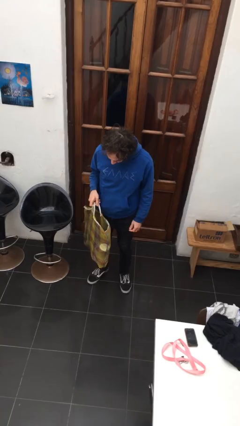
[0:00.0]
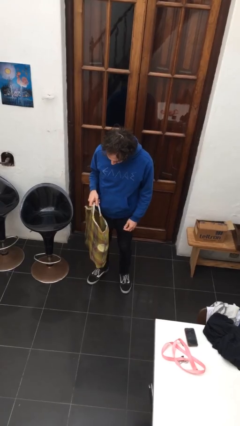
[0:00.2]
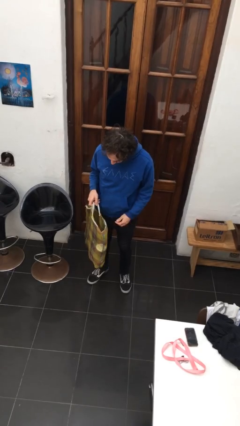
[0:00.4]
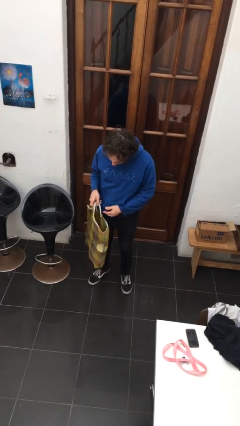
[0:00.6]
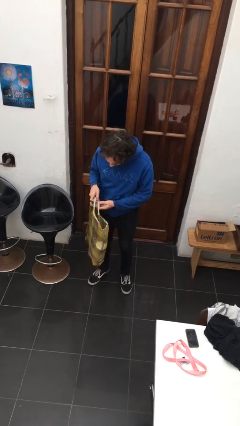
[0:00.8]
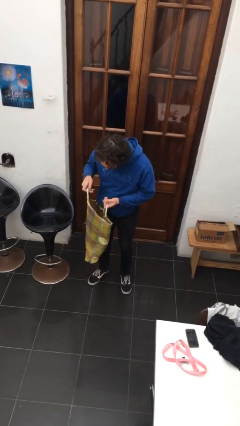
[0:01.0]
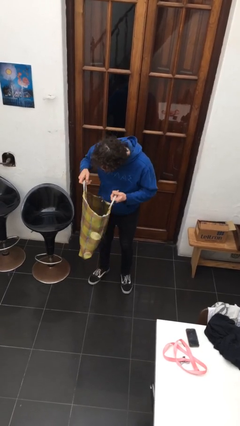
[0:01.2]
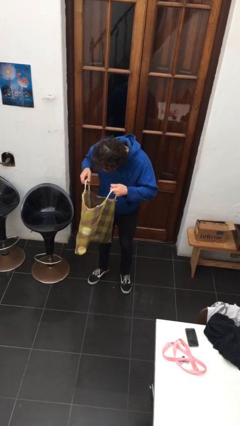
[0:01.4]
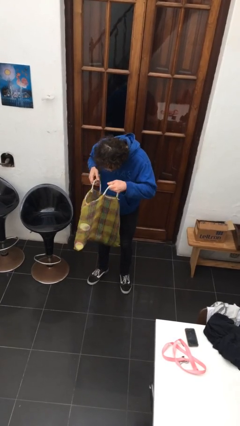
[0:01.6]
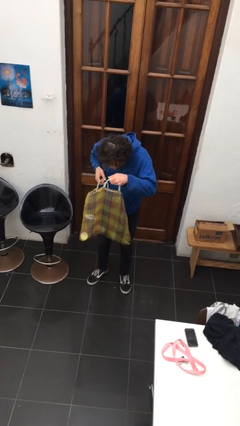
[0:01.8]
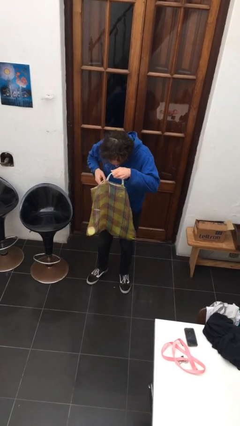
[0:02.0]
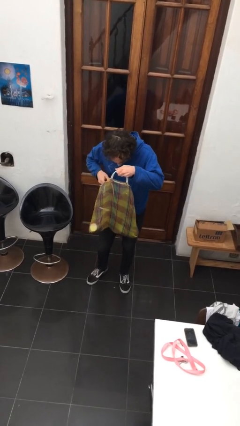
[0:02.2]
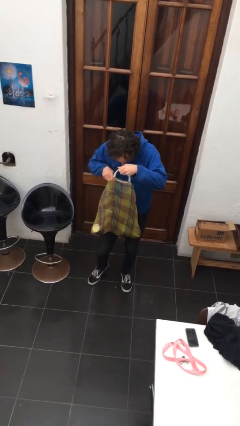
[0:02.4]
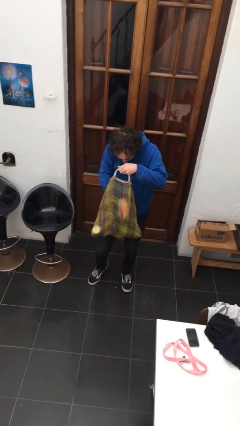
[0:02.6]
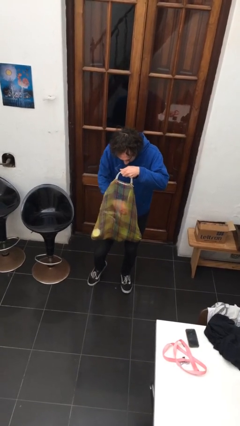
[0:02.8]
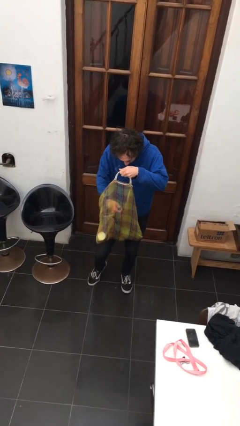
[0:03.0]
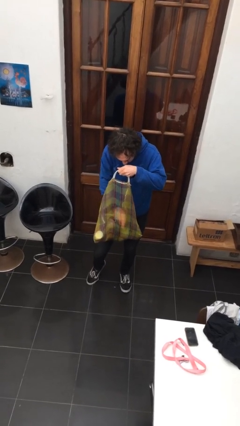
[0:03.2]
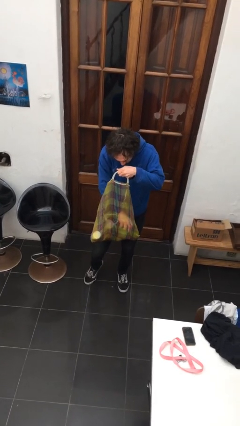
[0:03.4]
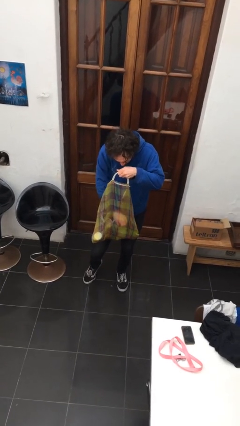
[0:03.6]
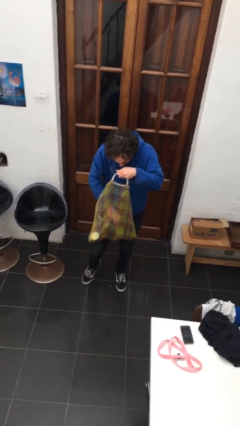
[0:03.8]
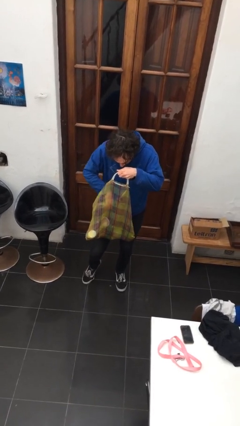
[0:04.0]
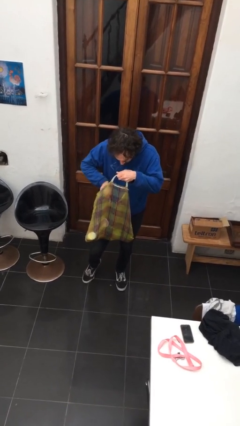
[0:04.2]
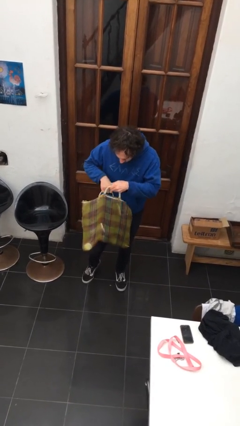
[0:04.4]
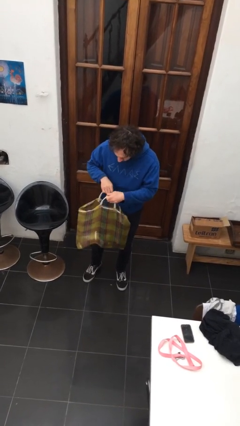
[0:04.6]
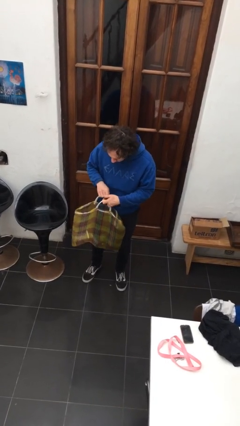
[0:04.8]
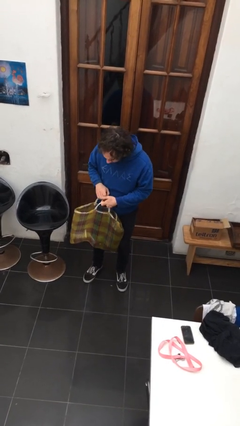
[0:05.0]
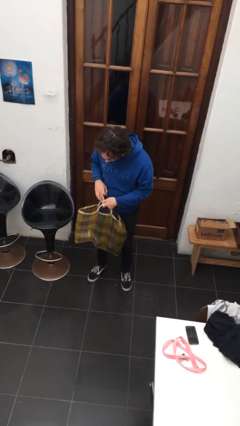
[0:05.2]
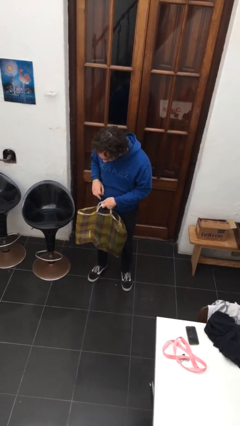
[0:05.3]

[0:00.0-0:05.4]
person searches in bag

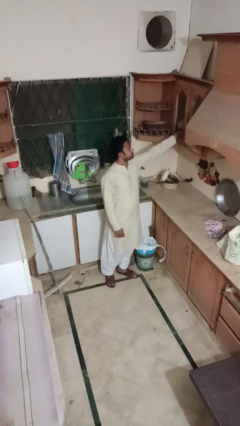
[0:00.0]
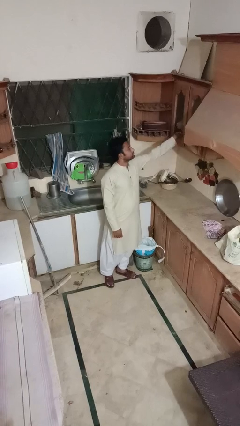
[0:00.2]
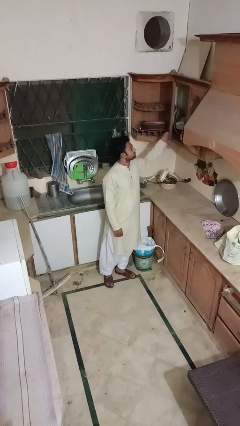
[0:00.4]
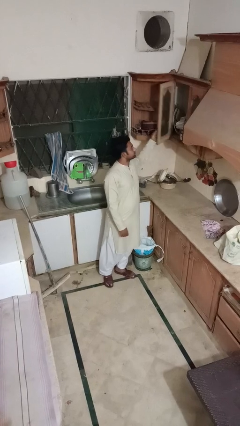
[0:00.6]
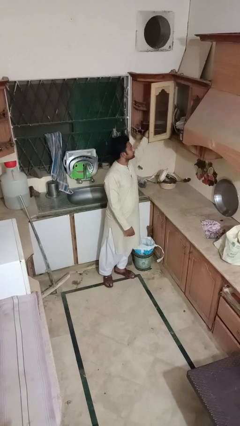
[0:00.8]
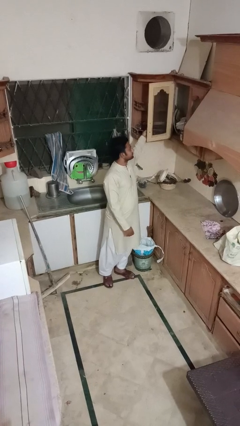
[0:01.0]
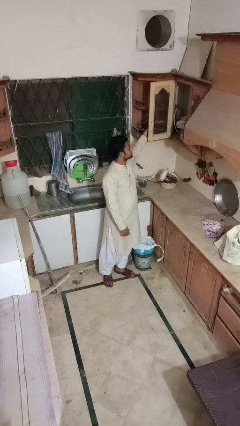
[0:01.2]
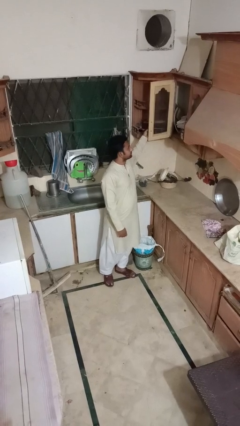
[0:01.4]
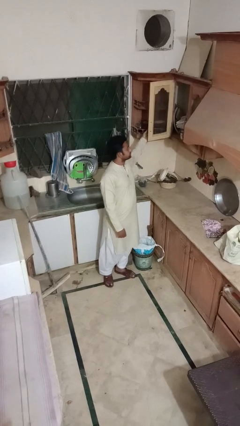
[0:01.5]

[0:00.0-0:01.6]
person opens cabinet

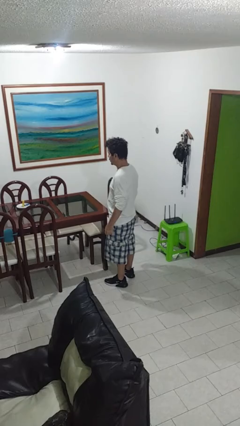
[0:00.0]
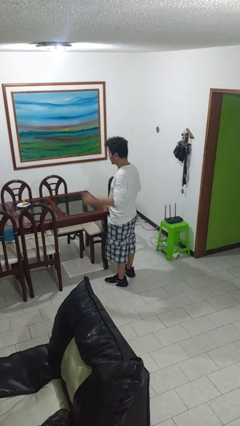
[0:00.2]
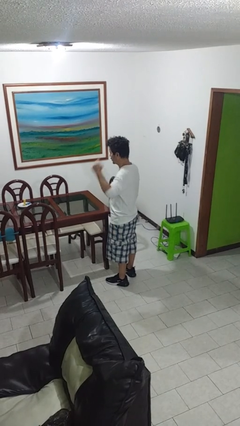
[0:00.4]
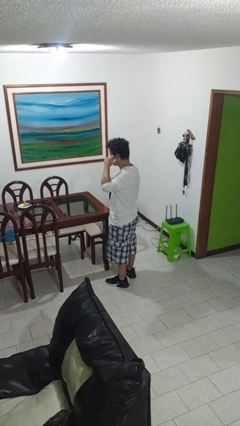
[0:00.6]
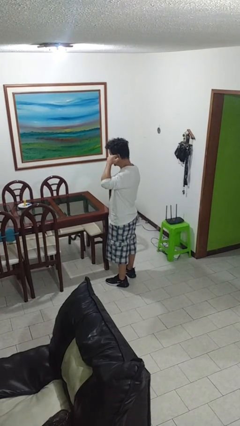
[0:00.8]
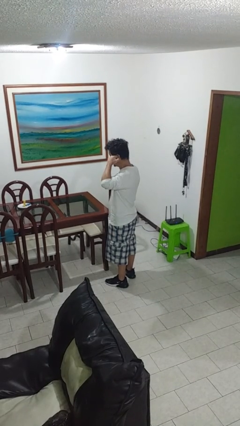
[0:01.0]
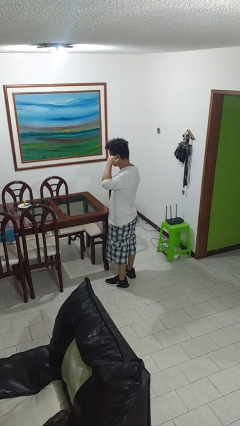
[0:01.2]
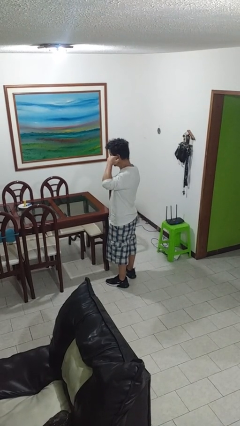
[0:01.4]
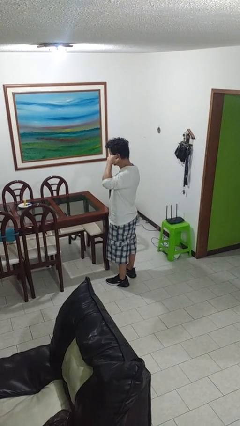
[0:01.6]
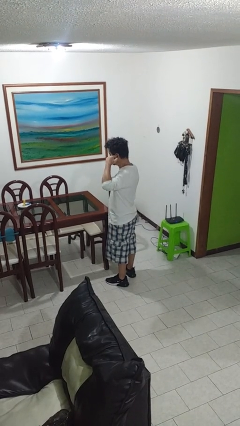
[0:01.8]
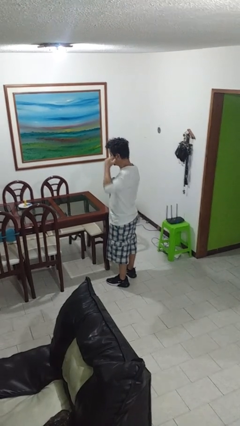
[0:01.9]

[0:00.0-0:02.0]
person puts fingers in ear

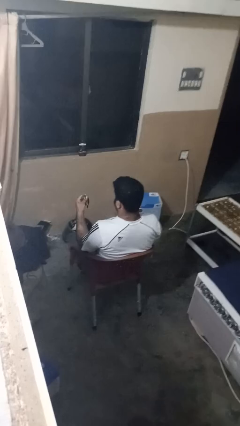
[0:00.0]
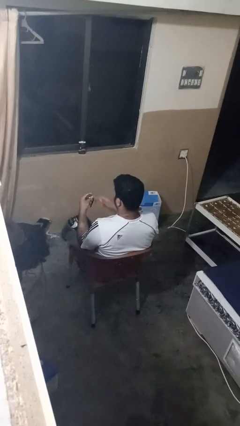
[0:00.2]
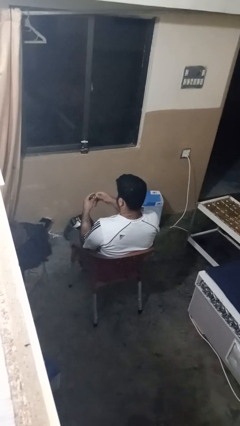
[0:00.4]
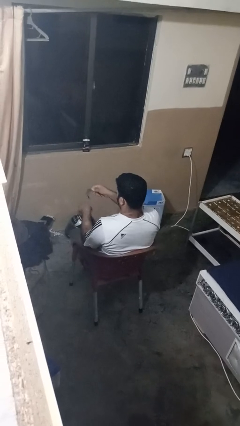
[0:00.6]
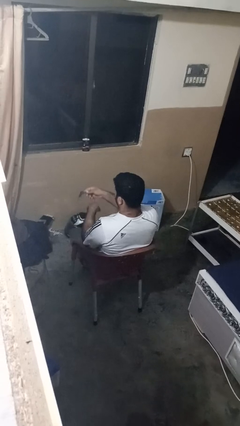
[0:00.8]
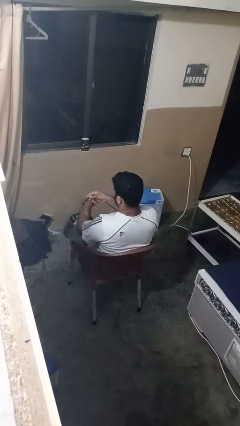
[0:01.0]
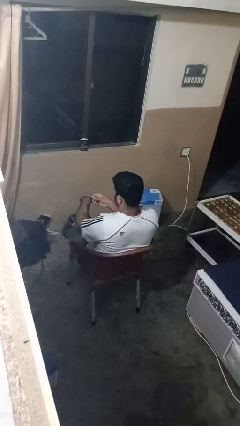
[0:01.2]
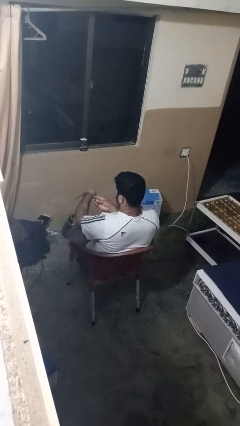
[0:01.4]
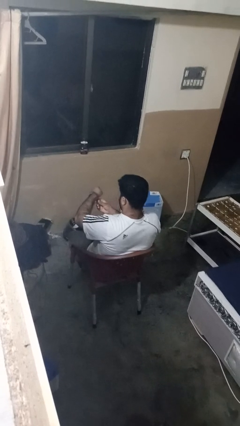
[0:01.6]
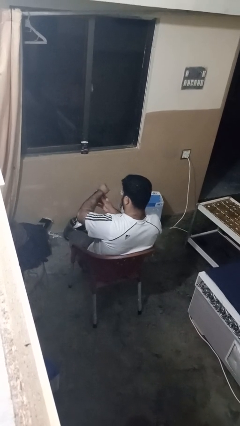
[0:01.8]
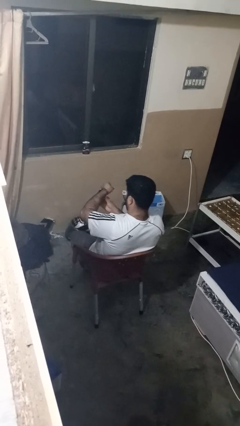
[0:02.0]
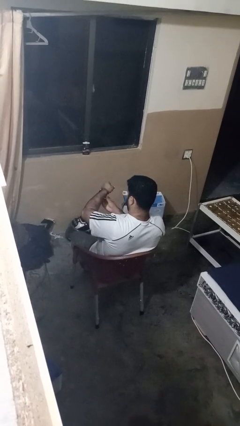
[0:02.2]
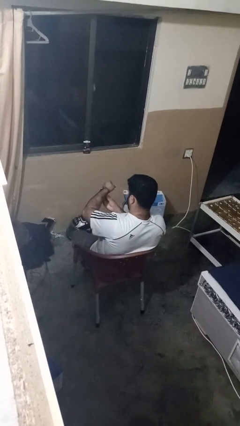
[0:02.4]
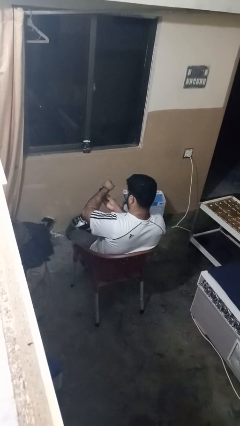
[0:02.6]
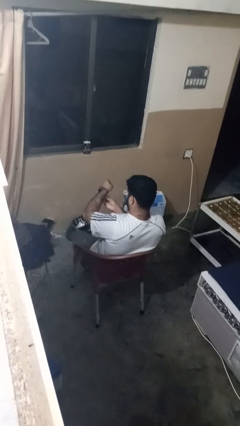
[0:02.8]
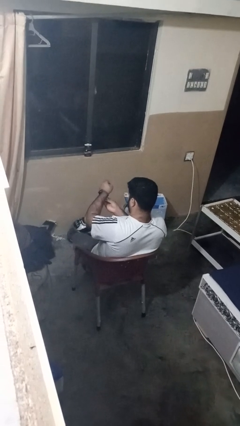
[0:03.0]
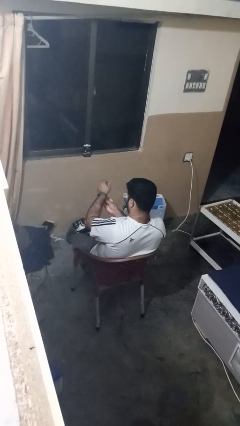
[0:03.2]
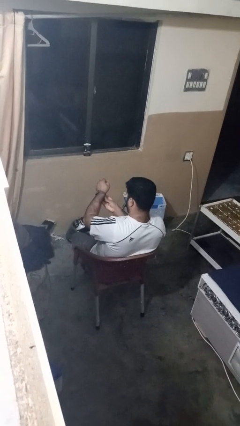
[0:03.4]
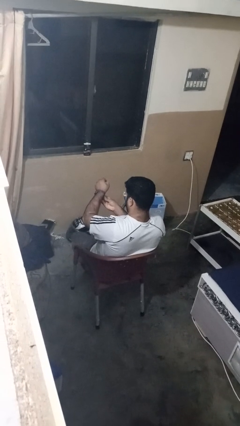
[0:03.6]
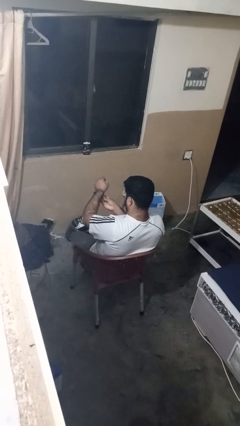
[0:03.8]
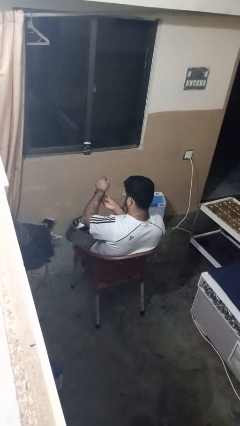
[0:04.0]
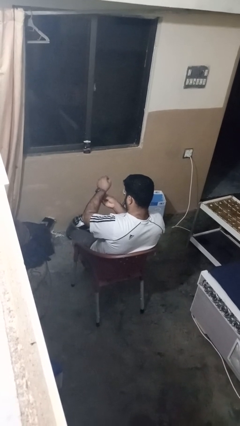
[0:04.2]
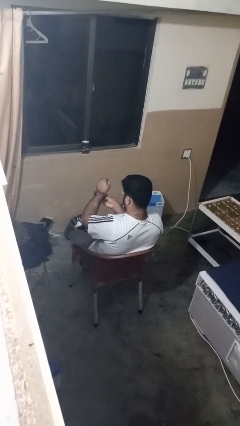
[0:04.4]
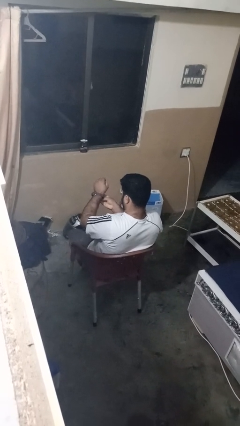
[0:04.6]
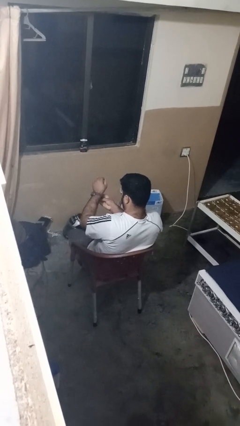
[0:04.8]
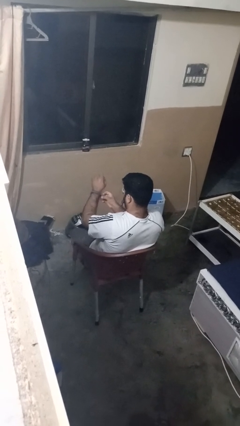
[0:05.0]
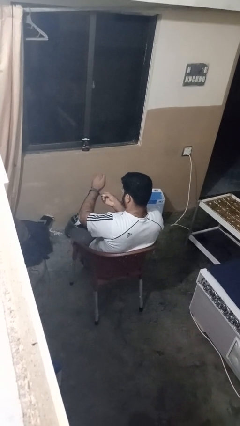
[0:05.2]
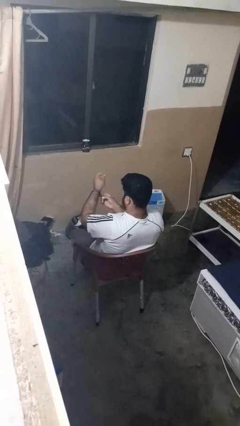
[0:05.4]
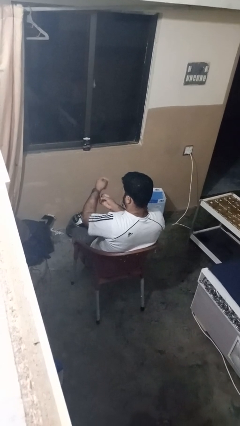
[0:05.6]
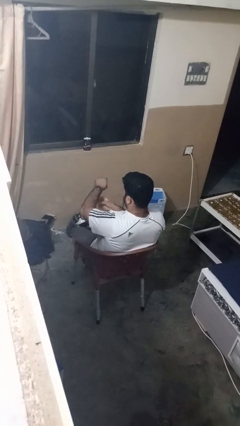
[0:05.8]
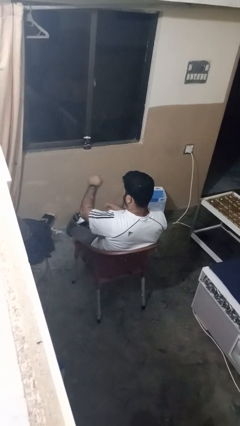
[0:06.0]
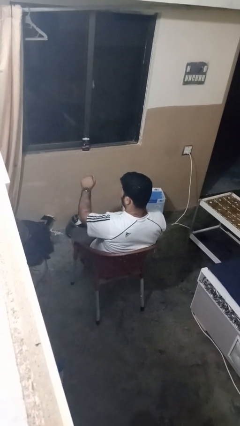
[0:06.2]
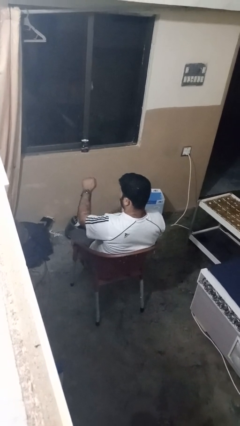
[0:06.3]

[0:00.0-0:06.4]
person puts on wristwatch

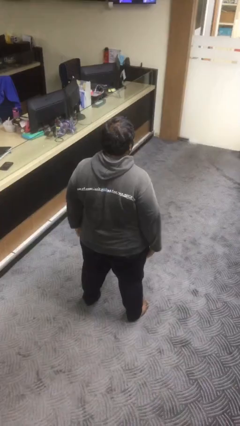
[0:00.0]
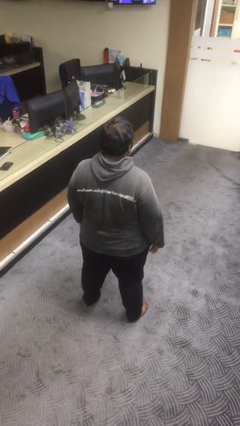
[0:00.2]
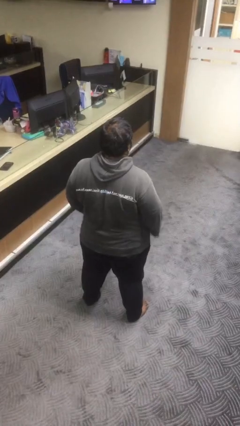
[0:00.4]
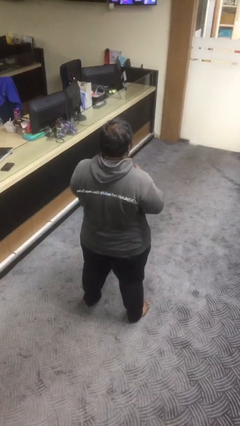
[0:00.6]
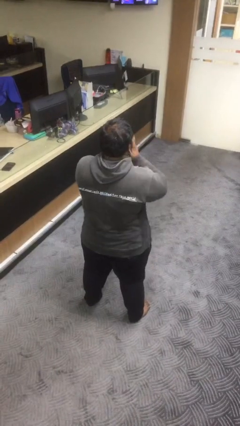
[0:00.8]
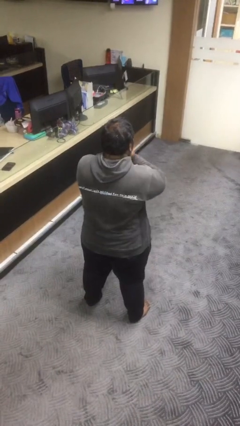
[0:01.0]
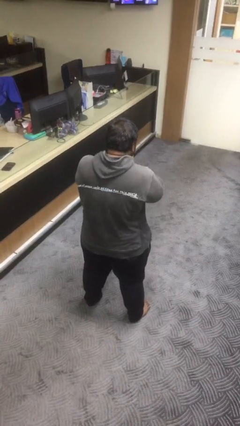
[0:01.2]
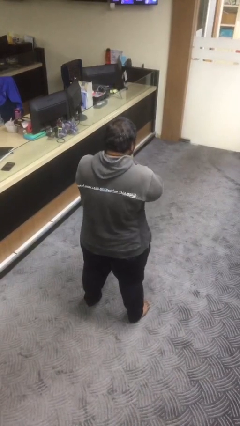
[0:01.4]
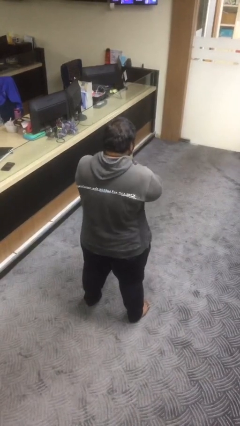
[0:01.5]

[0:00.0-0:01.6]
person sneezes into hand

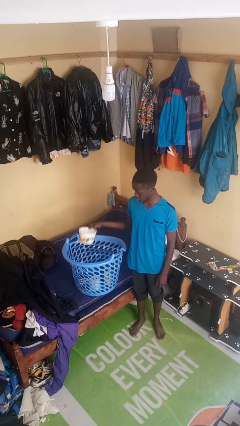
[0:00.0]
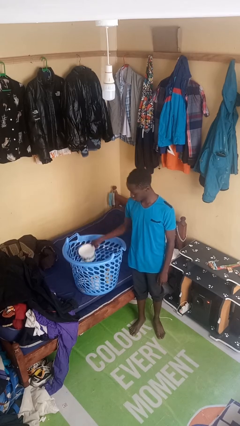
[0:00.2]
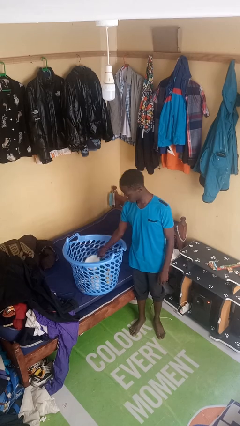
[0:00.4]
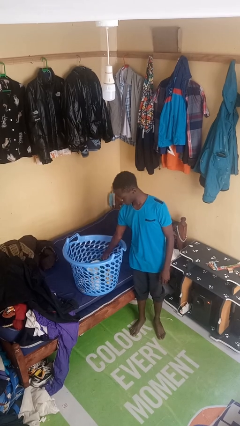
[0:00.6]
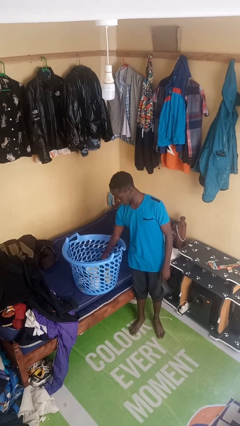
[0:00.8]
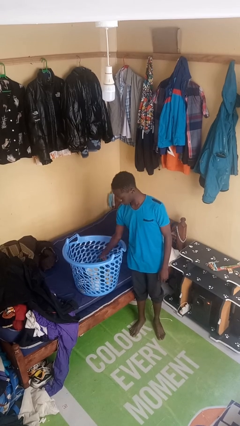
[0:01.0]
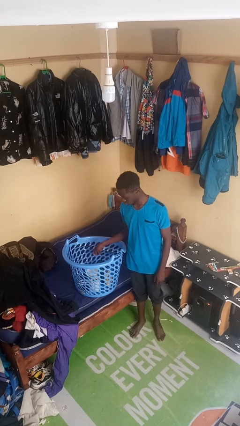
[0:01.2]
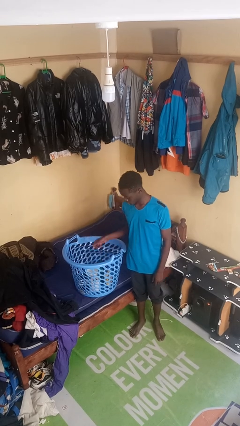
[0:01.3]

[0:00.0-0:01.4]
person puts object into basket
